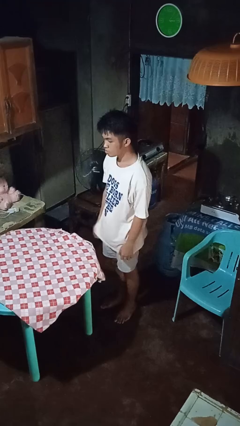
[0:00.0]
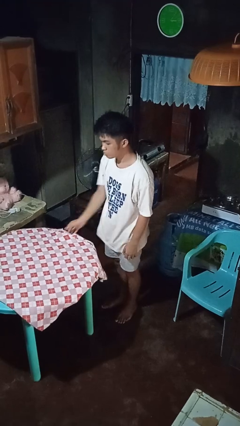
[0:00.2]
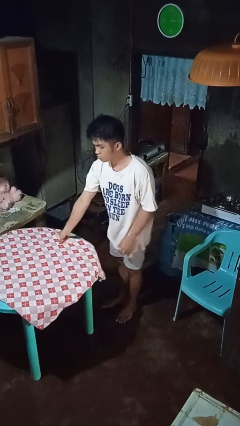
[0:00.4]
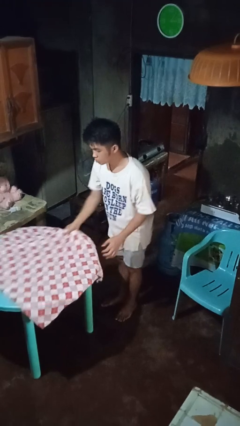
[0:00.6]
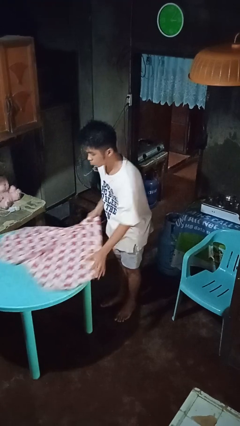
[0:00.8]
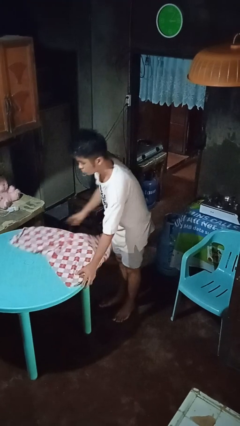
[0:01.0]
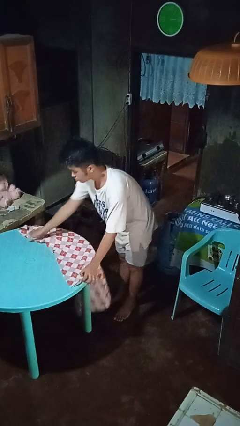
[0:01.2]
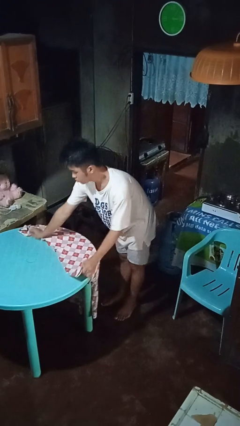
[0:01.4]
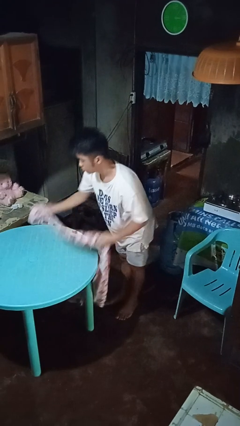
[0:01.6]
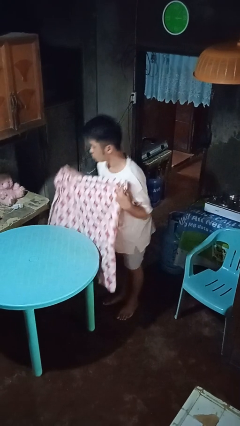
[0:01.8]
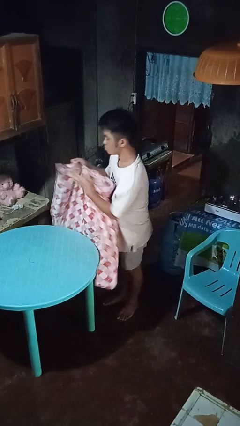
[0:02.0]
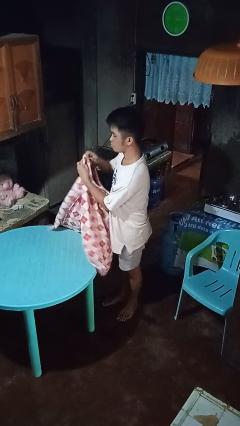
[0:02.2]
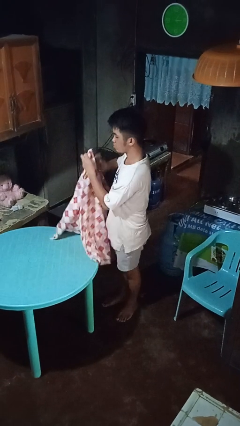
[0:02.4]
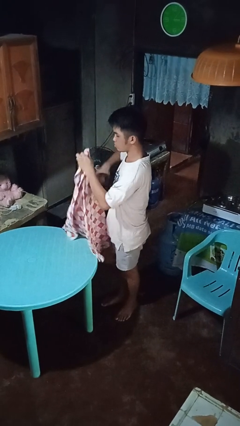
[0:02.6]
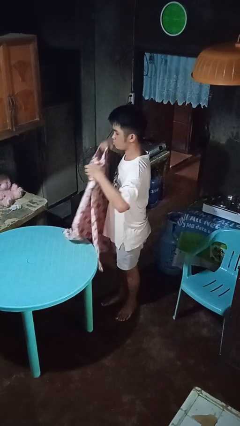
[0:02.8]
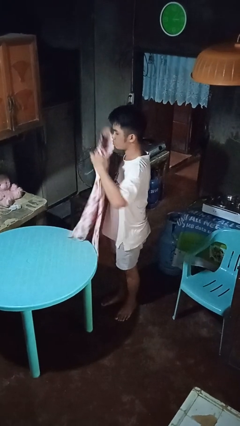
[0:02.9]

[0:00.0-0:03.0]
person folds tablecloth

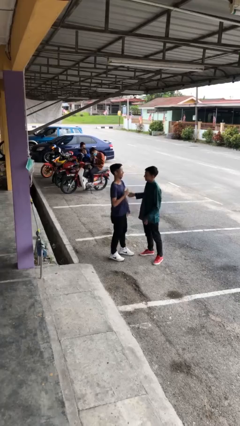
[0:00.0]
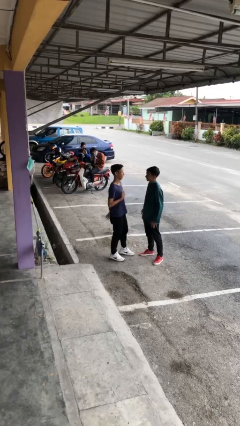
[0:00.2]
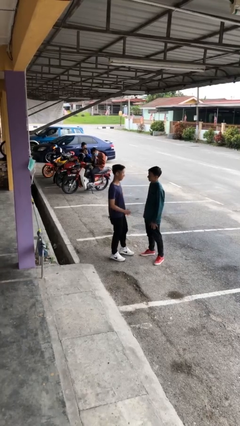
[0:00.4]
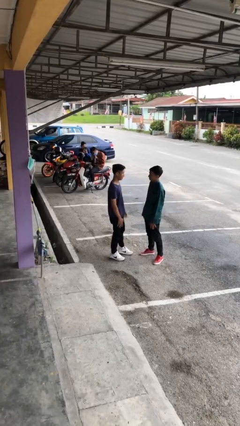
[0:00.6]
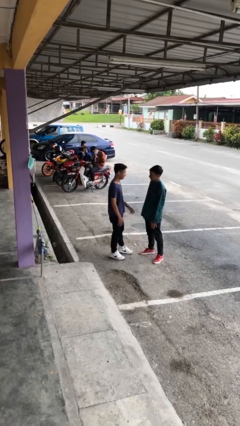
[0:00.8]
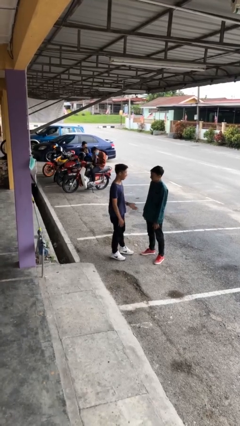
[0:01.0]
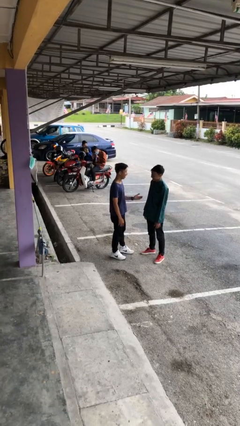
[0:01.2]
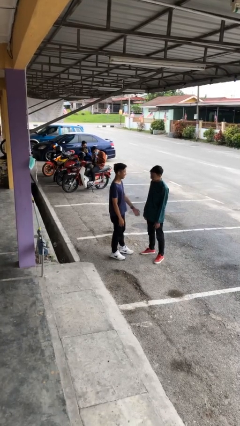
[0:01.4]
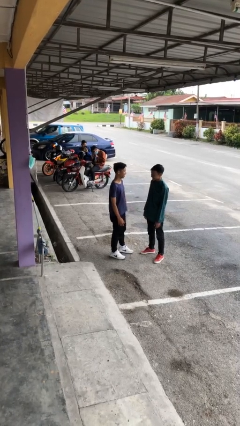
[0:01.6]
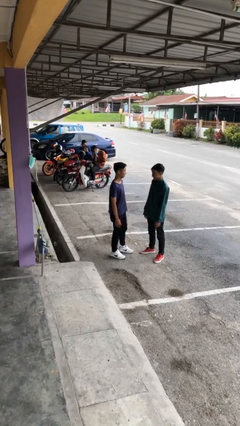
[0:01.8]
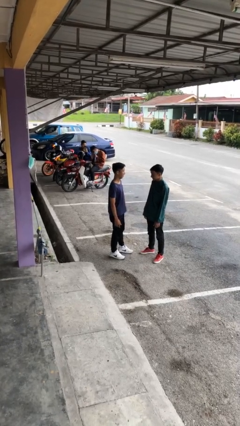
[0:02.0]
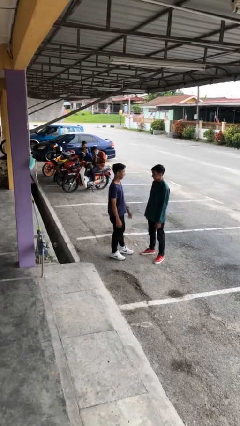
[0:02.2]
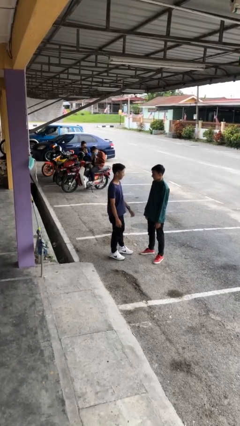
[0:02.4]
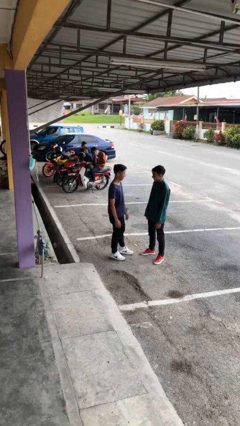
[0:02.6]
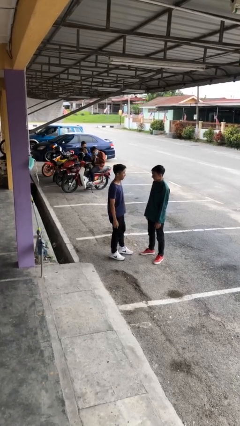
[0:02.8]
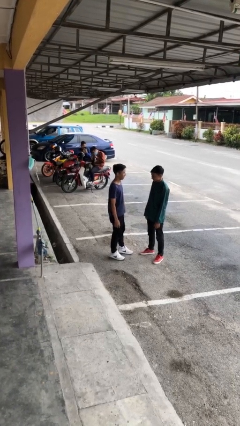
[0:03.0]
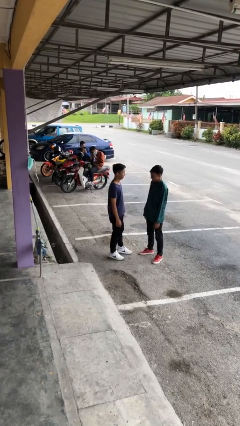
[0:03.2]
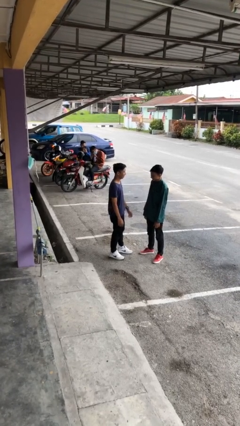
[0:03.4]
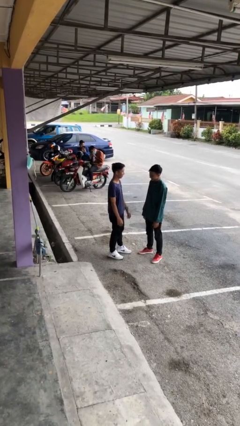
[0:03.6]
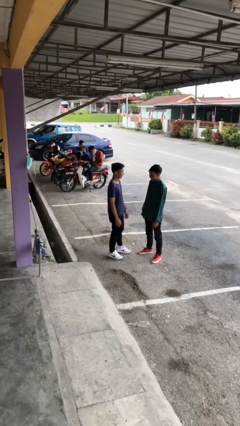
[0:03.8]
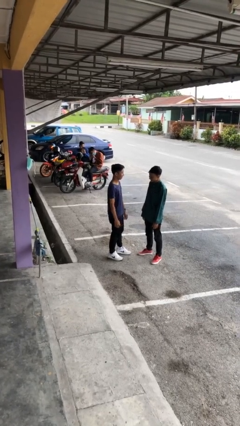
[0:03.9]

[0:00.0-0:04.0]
person talks to person

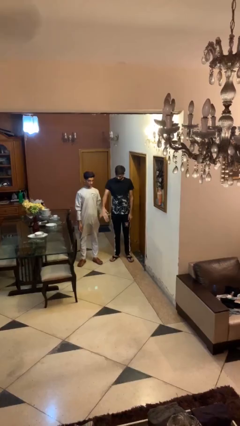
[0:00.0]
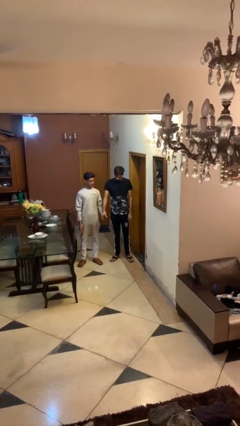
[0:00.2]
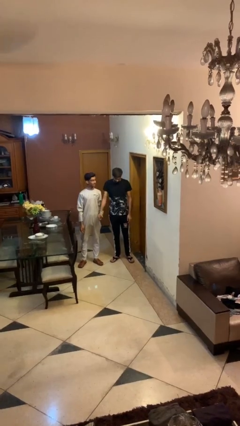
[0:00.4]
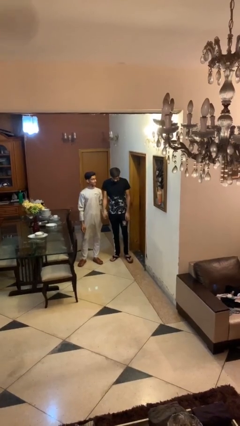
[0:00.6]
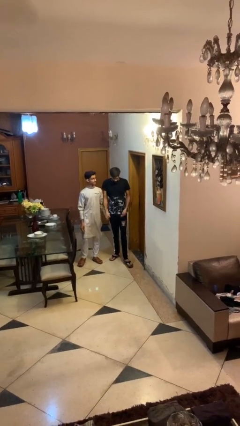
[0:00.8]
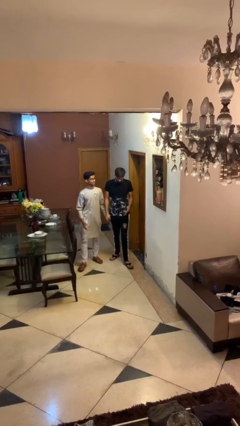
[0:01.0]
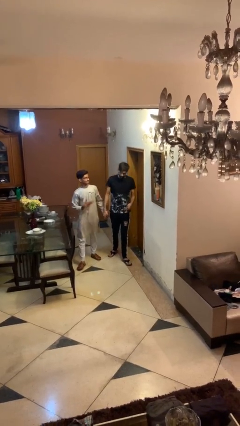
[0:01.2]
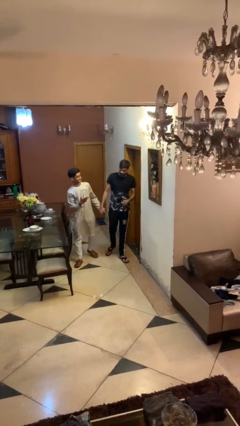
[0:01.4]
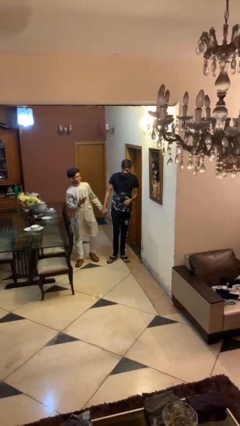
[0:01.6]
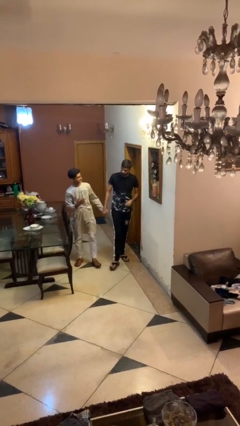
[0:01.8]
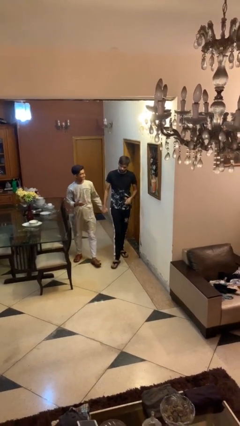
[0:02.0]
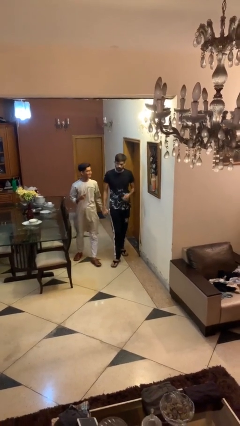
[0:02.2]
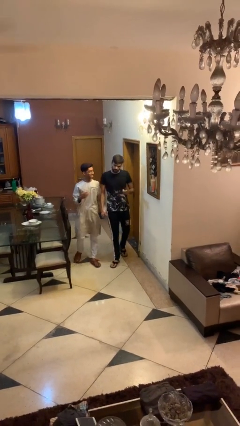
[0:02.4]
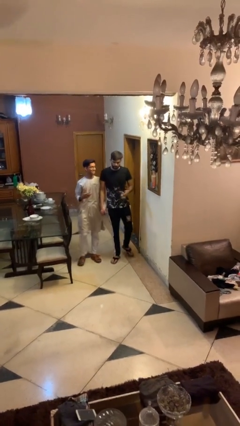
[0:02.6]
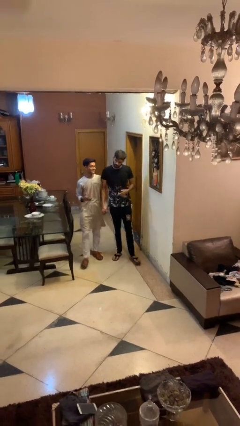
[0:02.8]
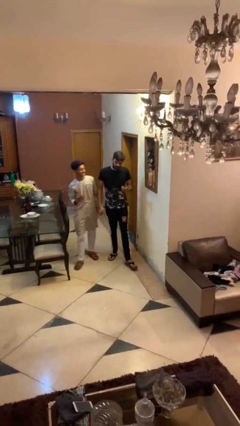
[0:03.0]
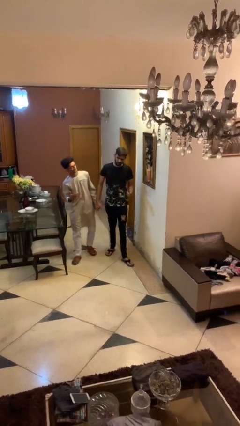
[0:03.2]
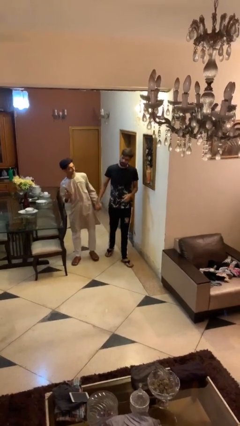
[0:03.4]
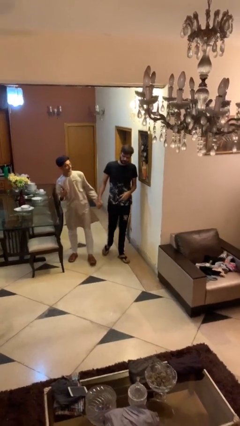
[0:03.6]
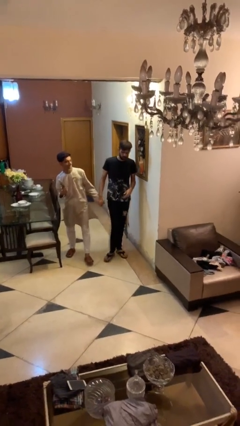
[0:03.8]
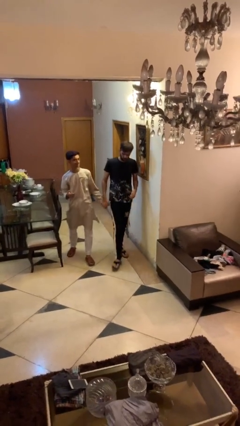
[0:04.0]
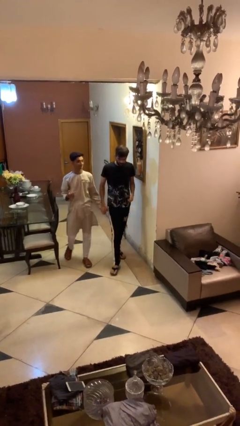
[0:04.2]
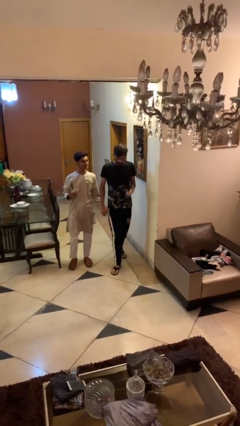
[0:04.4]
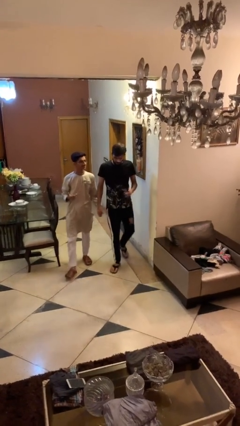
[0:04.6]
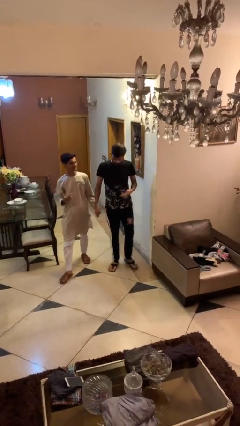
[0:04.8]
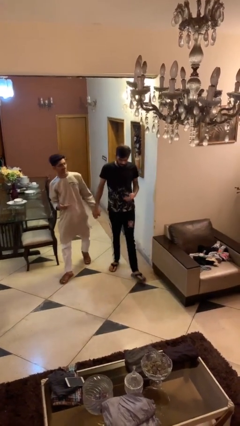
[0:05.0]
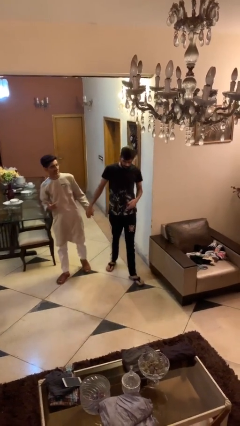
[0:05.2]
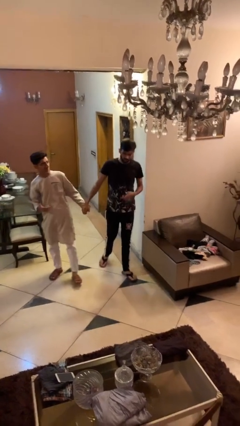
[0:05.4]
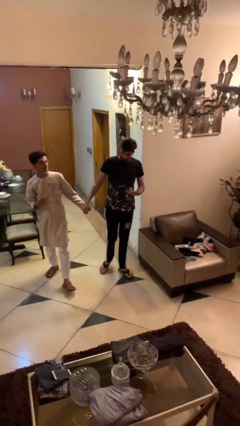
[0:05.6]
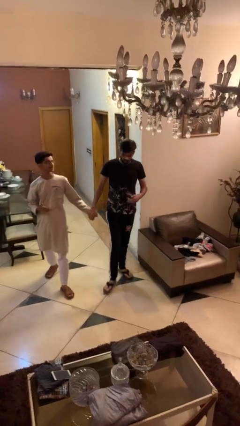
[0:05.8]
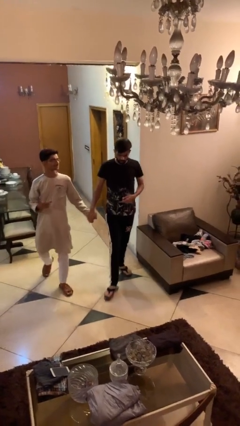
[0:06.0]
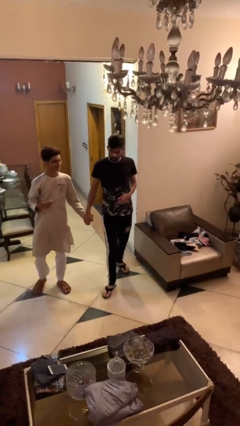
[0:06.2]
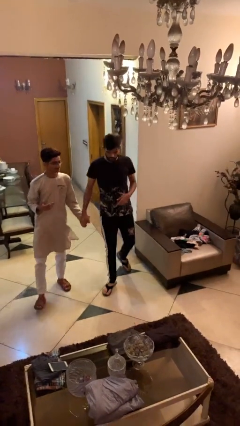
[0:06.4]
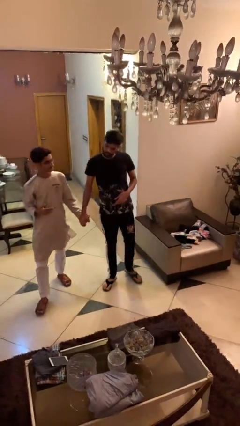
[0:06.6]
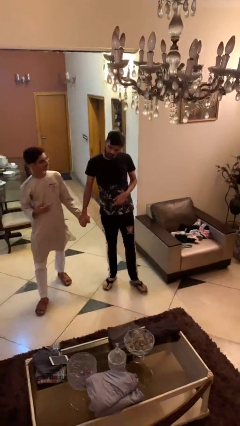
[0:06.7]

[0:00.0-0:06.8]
person holds hand

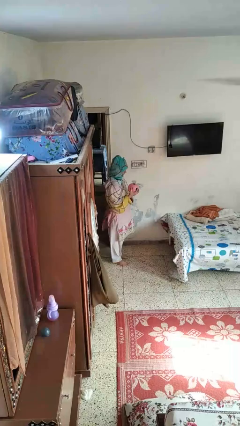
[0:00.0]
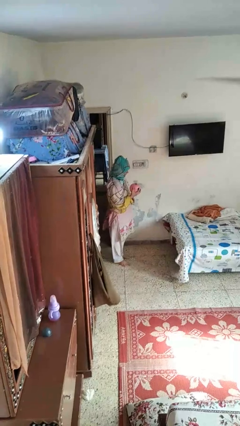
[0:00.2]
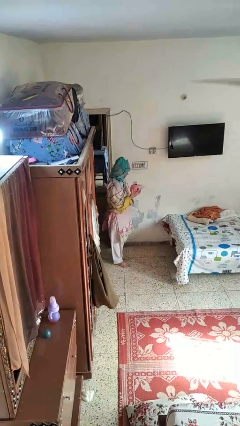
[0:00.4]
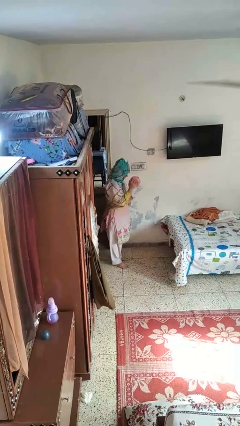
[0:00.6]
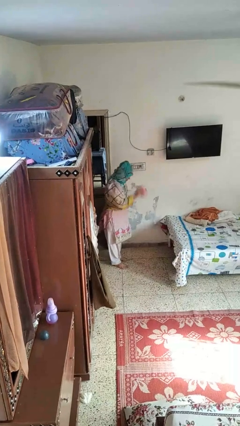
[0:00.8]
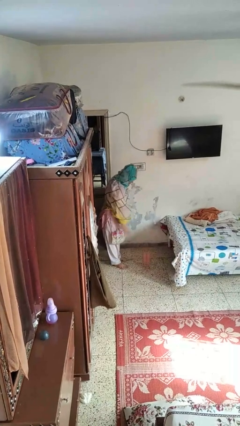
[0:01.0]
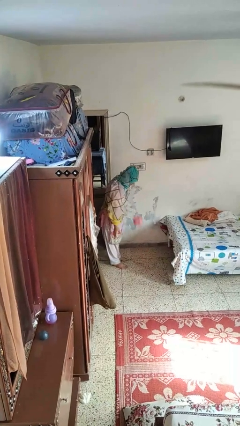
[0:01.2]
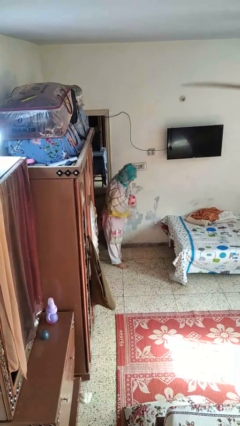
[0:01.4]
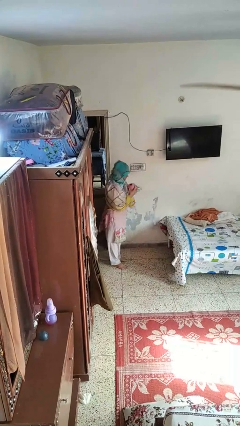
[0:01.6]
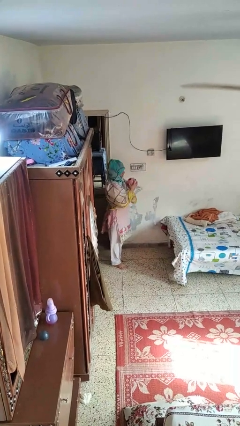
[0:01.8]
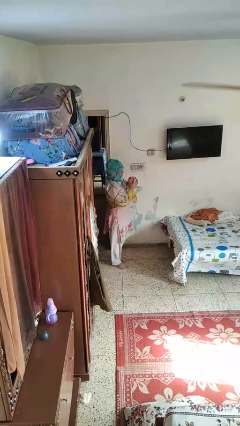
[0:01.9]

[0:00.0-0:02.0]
person bounces ball on floor

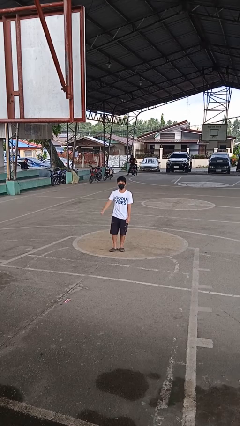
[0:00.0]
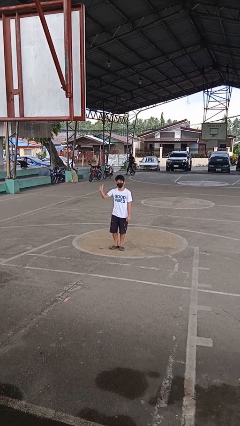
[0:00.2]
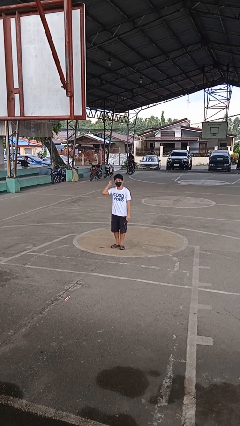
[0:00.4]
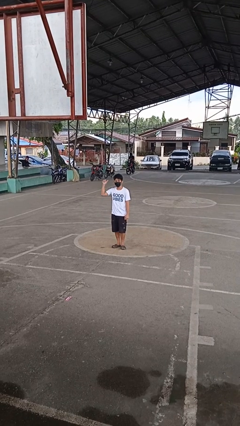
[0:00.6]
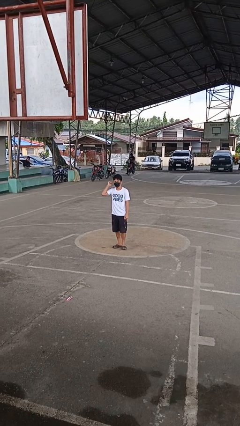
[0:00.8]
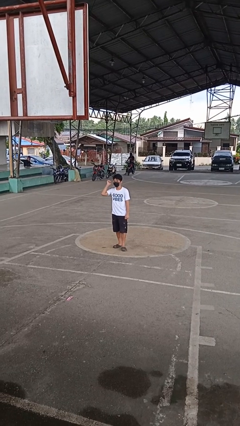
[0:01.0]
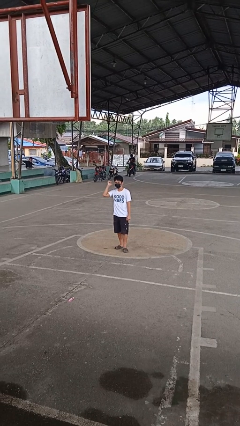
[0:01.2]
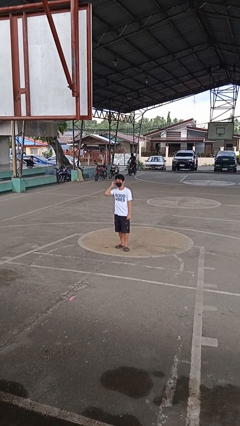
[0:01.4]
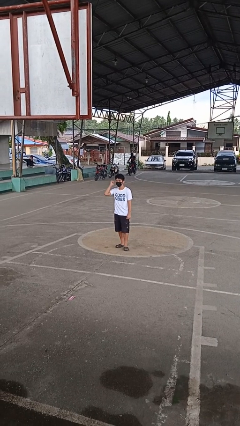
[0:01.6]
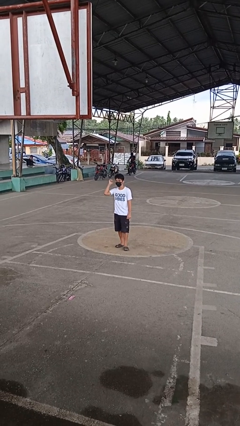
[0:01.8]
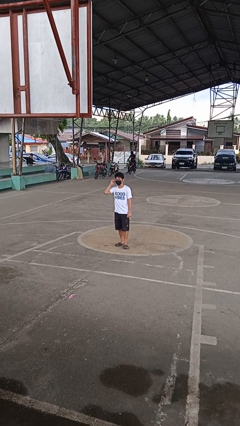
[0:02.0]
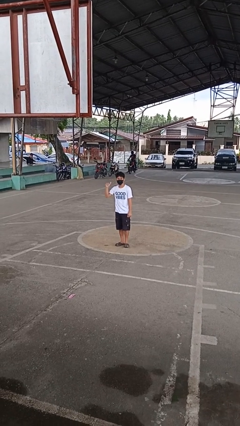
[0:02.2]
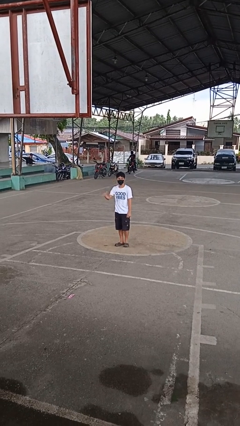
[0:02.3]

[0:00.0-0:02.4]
person gestures behind me
